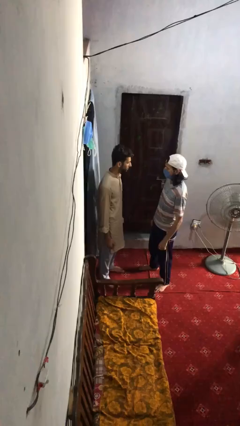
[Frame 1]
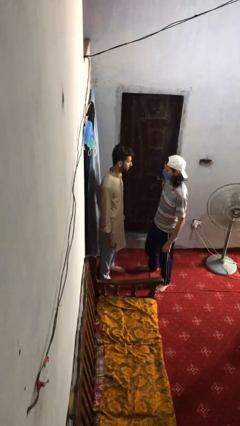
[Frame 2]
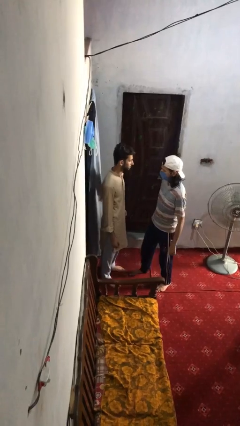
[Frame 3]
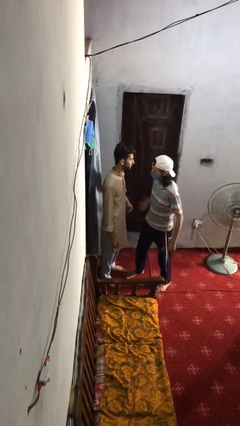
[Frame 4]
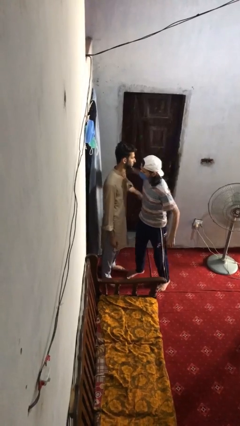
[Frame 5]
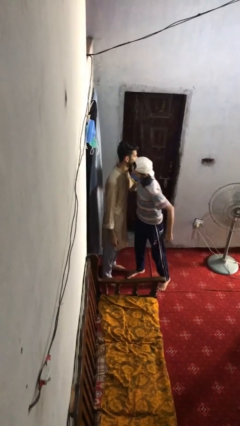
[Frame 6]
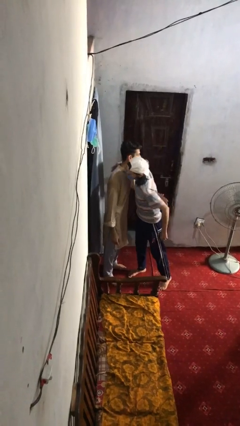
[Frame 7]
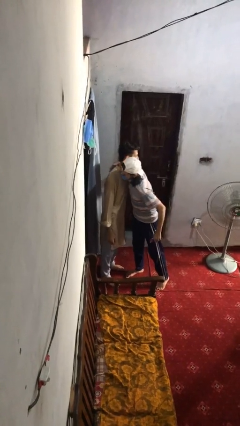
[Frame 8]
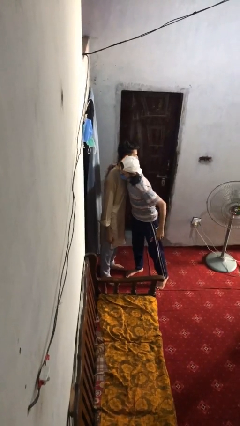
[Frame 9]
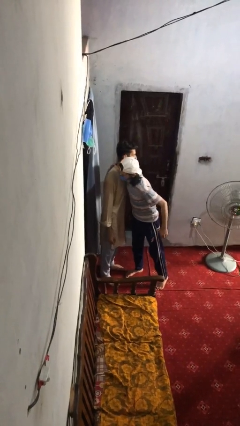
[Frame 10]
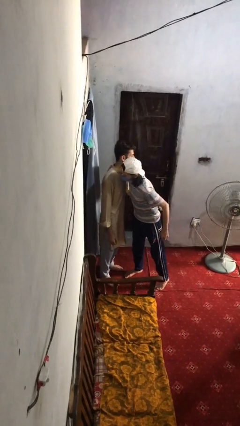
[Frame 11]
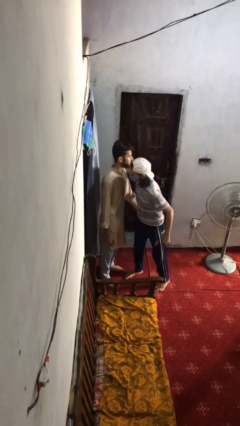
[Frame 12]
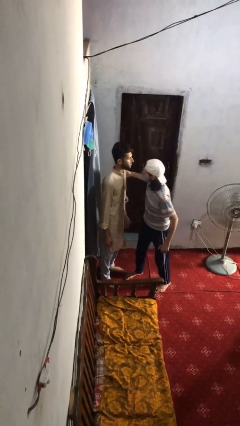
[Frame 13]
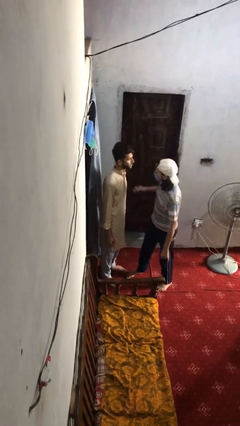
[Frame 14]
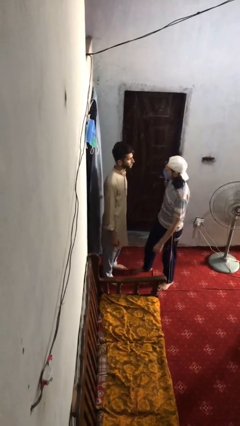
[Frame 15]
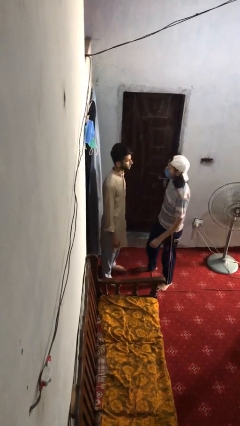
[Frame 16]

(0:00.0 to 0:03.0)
person embraces person

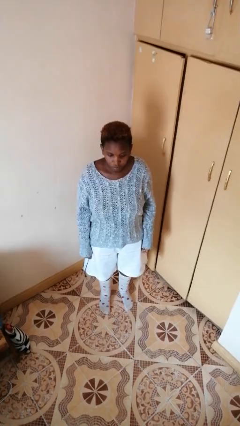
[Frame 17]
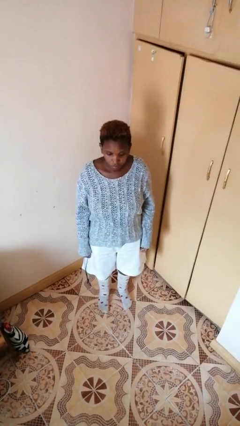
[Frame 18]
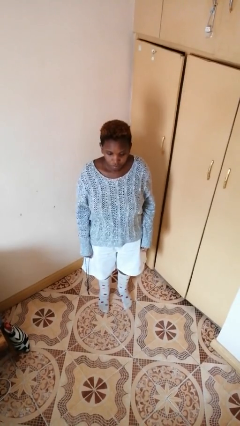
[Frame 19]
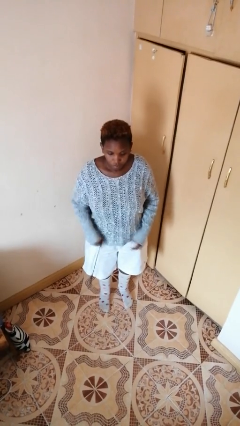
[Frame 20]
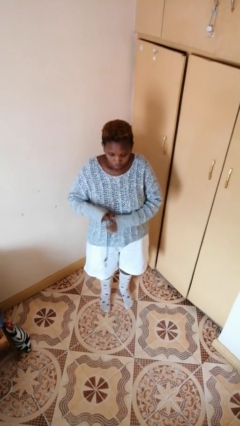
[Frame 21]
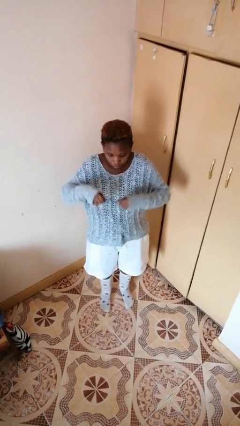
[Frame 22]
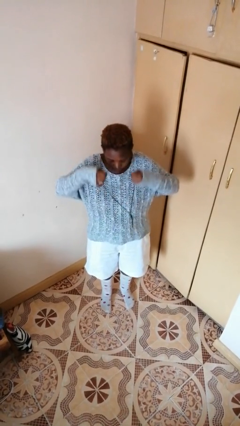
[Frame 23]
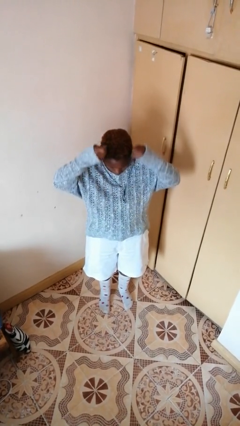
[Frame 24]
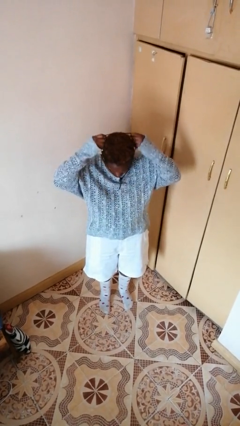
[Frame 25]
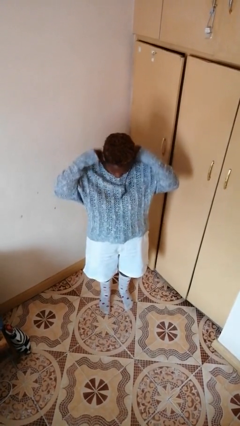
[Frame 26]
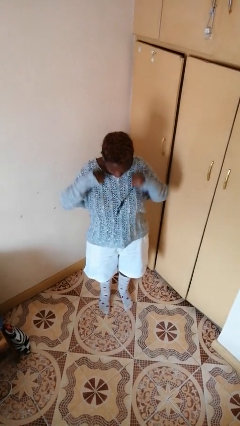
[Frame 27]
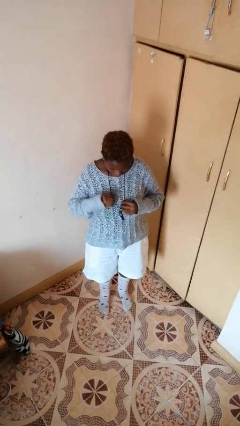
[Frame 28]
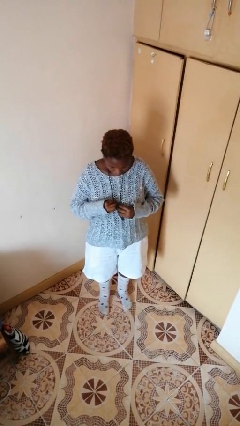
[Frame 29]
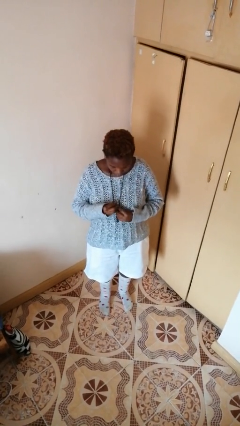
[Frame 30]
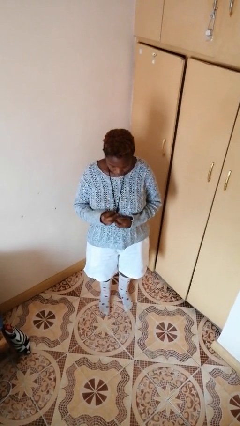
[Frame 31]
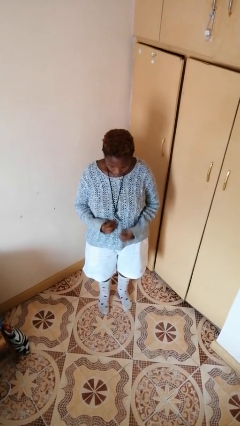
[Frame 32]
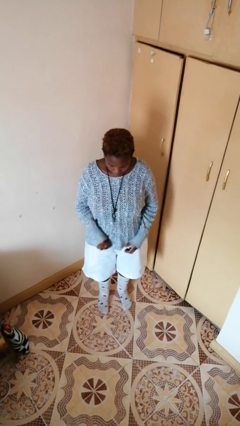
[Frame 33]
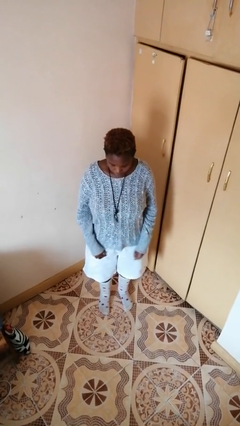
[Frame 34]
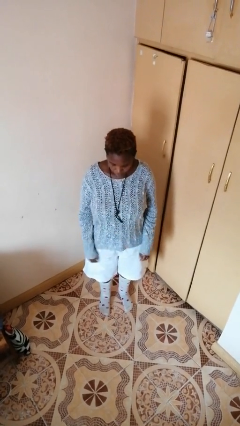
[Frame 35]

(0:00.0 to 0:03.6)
person puts on necklace

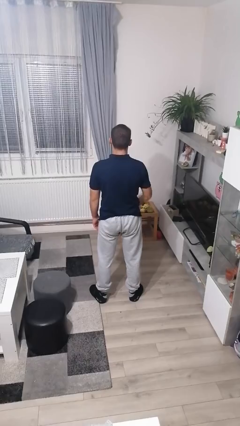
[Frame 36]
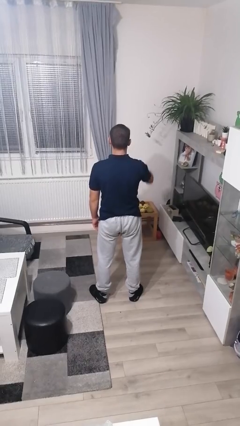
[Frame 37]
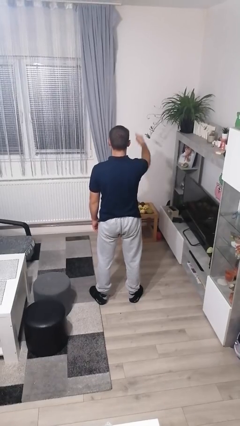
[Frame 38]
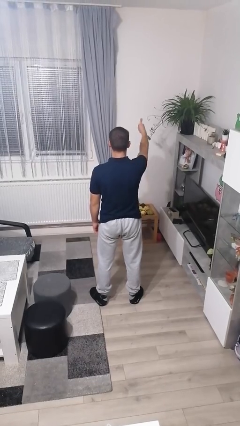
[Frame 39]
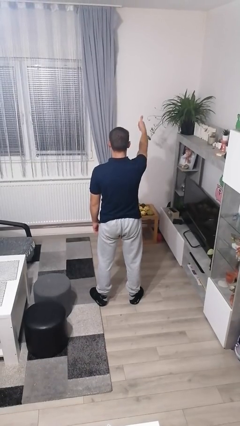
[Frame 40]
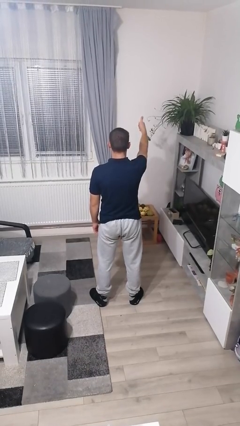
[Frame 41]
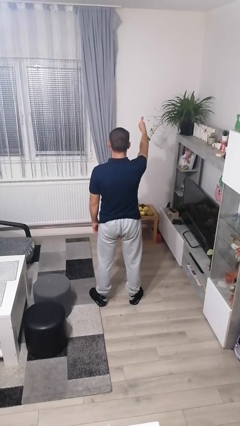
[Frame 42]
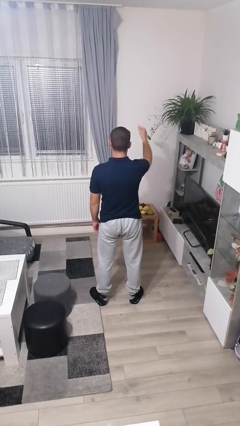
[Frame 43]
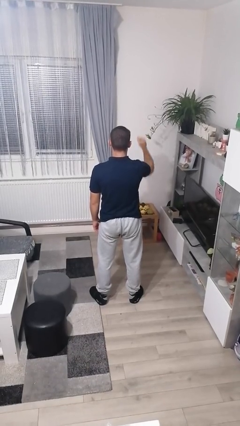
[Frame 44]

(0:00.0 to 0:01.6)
person gestures number one

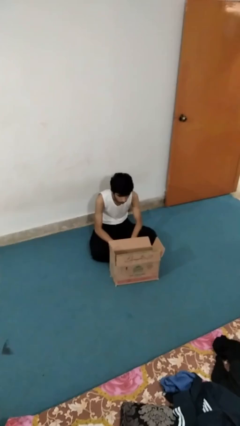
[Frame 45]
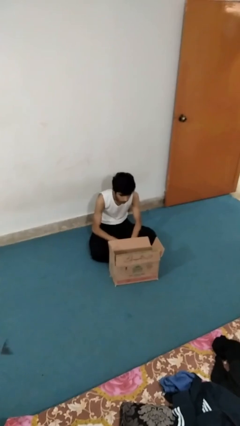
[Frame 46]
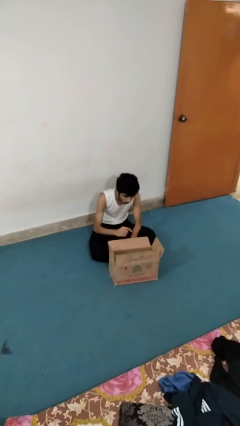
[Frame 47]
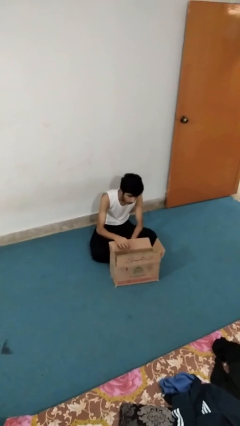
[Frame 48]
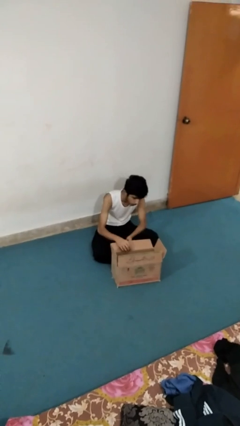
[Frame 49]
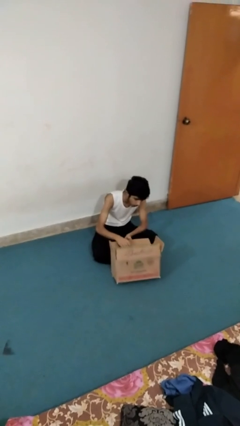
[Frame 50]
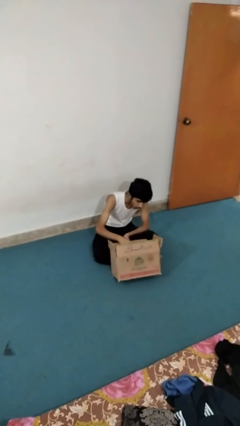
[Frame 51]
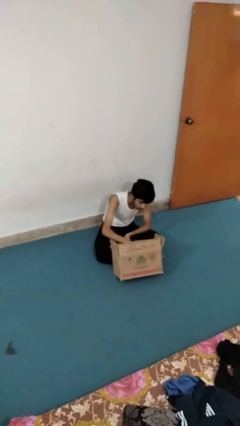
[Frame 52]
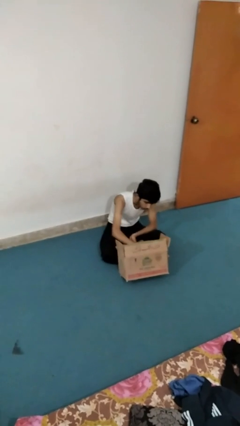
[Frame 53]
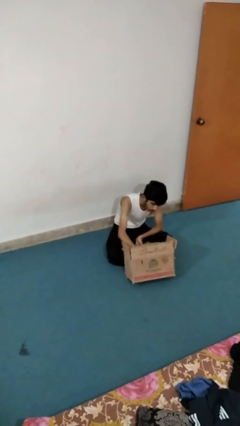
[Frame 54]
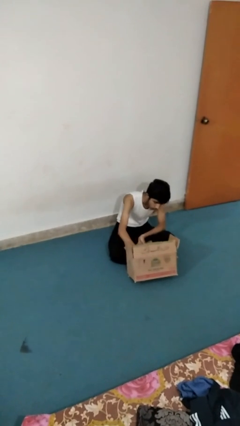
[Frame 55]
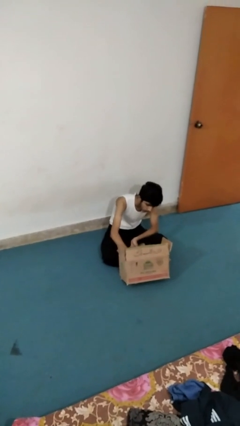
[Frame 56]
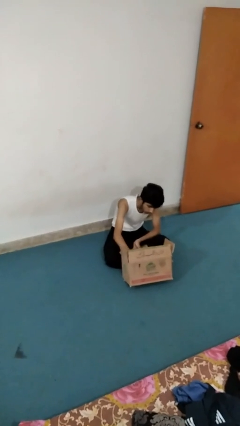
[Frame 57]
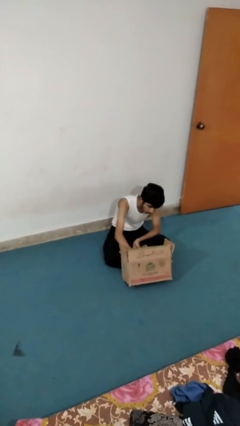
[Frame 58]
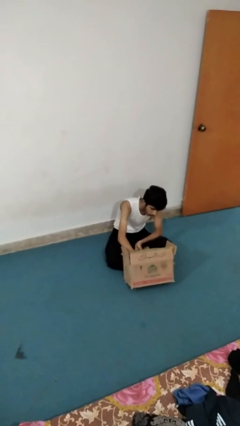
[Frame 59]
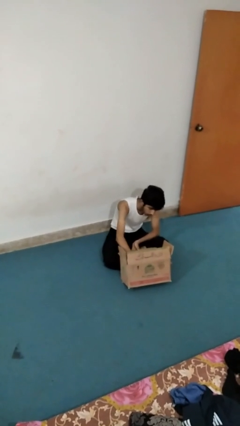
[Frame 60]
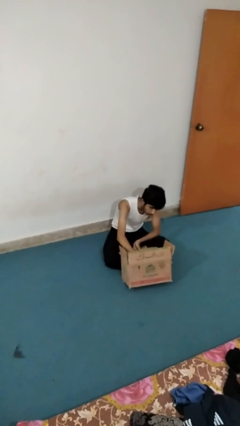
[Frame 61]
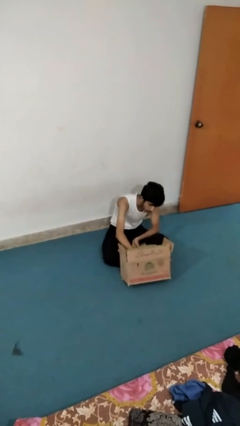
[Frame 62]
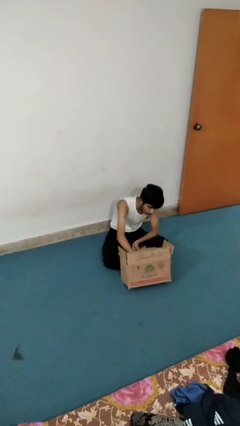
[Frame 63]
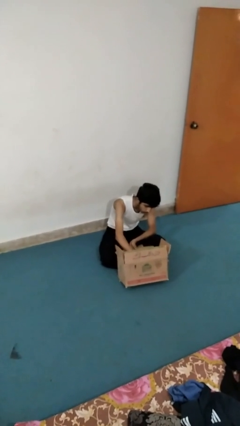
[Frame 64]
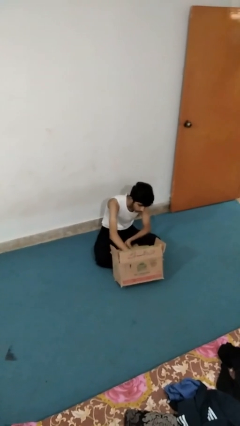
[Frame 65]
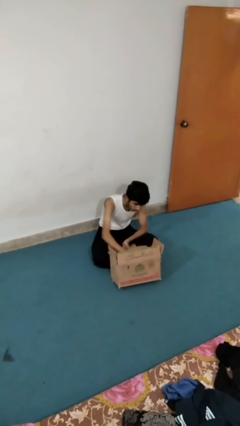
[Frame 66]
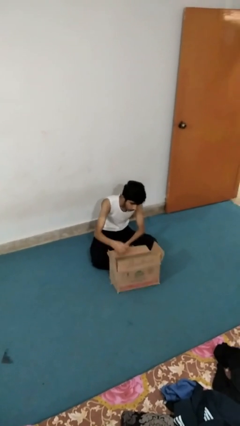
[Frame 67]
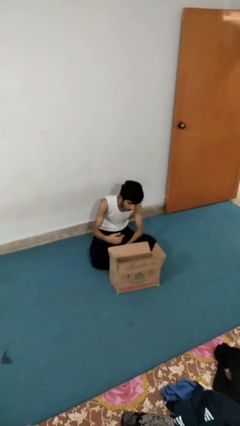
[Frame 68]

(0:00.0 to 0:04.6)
person searches in box

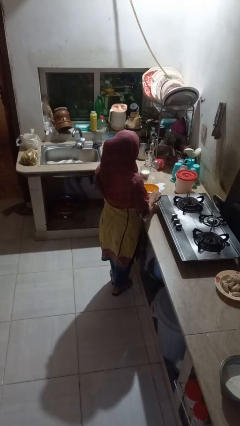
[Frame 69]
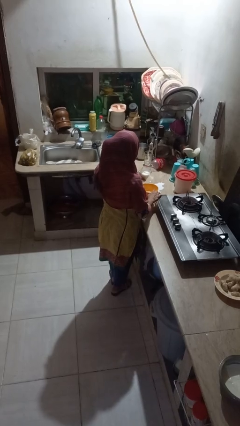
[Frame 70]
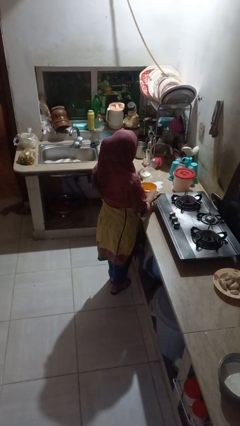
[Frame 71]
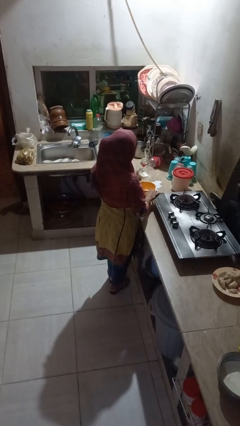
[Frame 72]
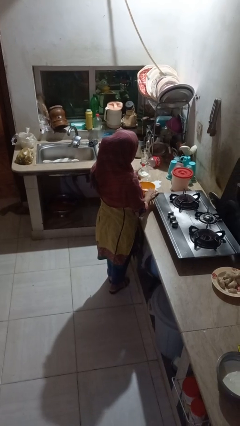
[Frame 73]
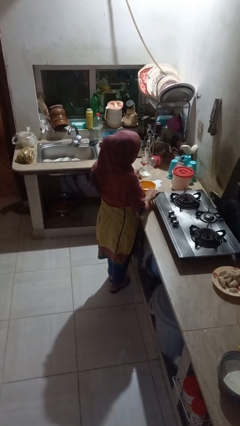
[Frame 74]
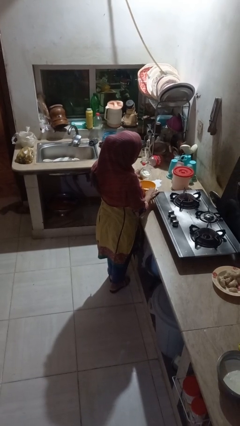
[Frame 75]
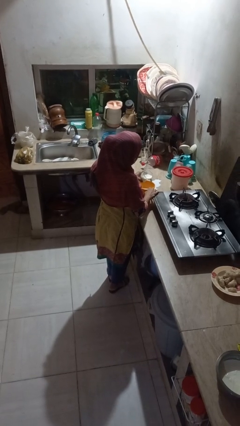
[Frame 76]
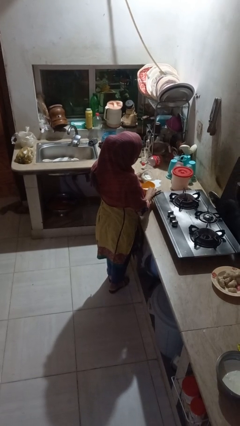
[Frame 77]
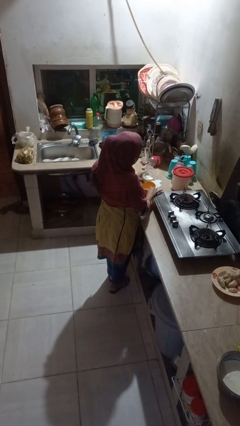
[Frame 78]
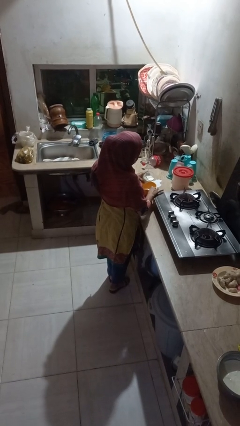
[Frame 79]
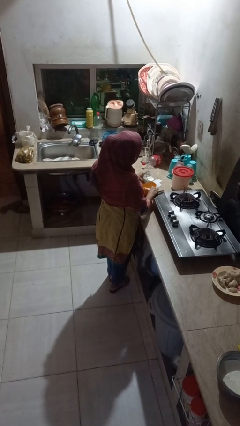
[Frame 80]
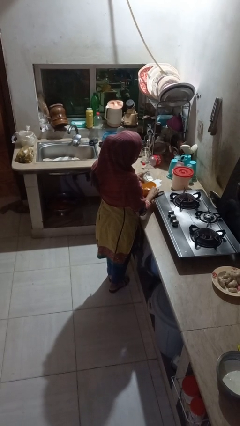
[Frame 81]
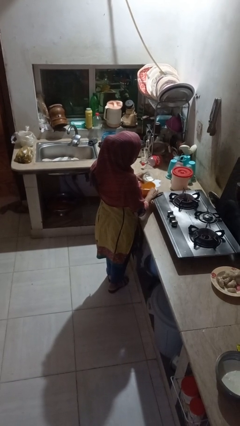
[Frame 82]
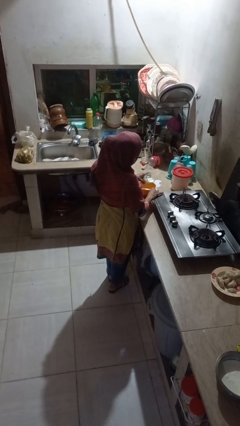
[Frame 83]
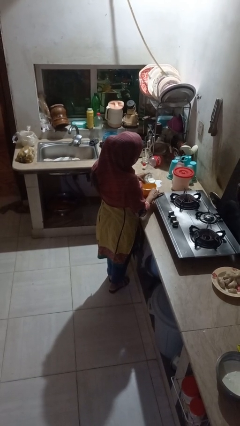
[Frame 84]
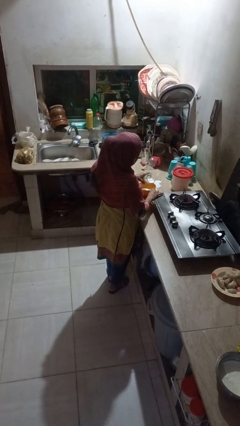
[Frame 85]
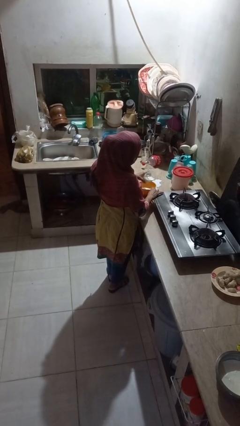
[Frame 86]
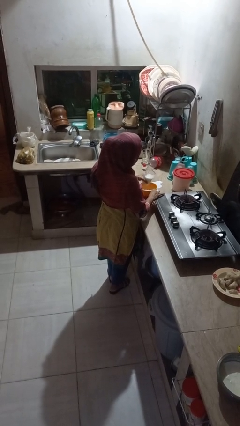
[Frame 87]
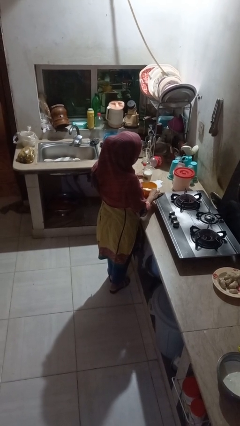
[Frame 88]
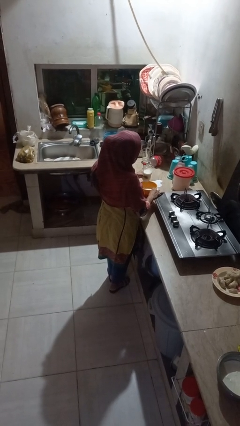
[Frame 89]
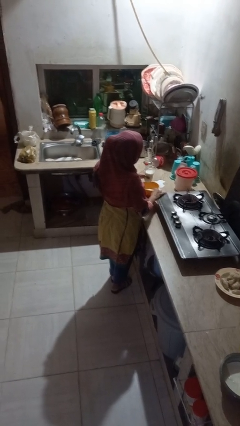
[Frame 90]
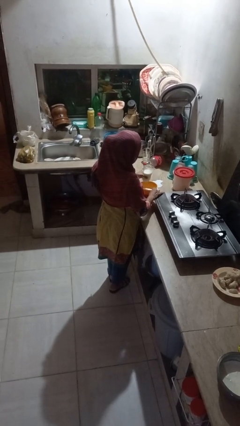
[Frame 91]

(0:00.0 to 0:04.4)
person pours into bowl

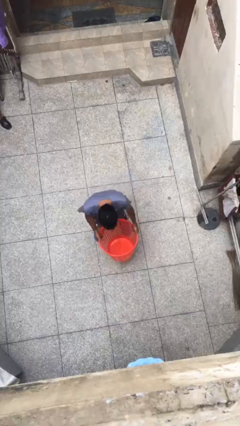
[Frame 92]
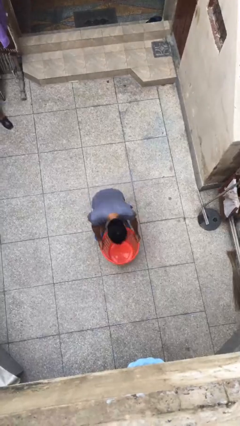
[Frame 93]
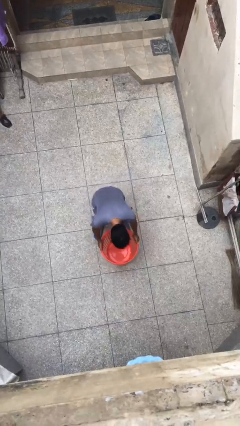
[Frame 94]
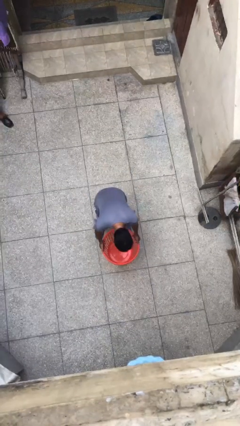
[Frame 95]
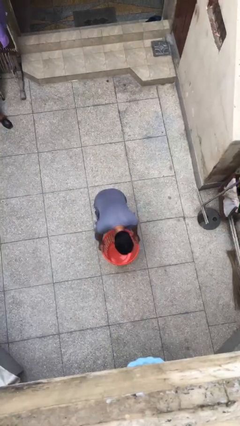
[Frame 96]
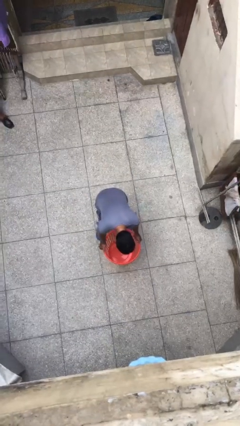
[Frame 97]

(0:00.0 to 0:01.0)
person puts down object on floor
